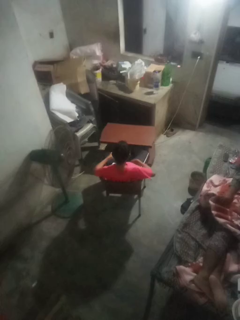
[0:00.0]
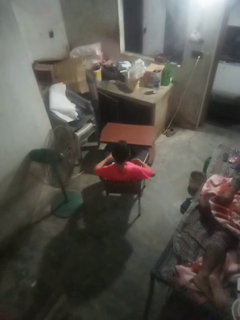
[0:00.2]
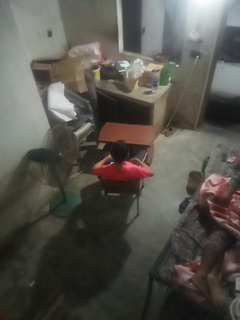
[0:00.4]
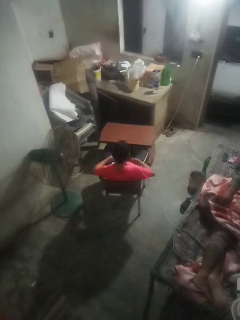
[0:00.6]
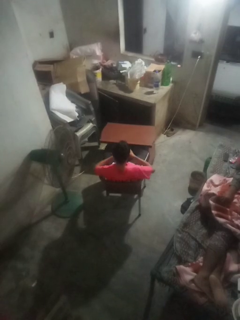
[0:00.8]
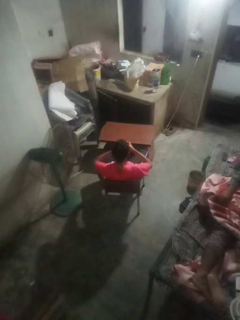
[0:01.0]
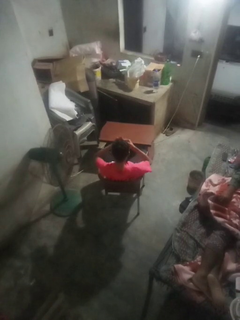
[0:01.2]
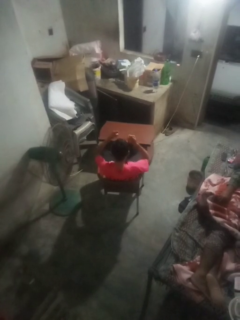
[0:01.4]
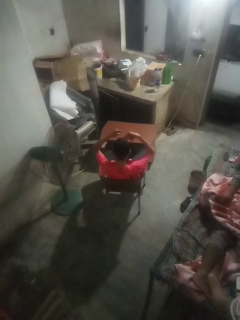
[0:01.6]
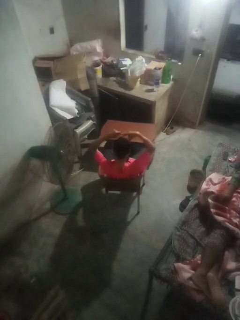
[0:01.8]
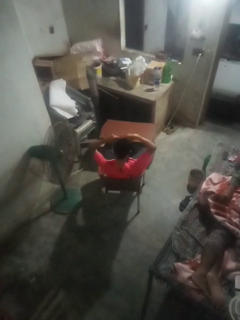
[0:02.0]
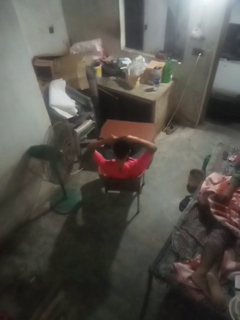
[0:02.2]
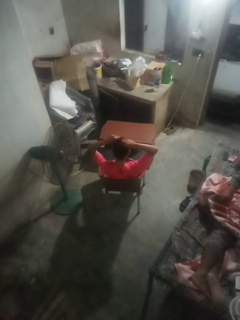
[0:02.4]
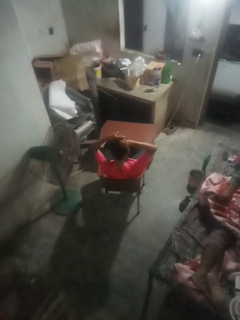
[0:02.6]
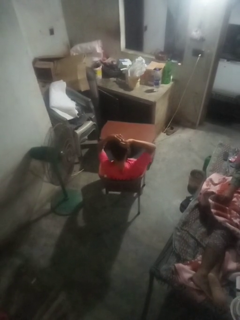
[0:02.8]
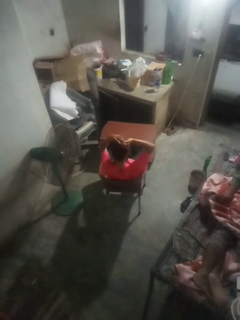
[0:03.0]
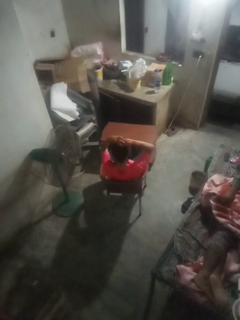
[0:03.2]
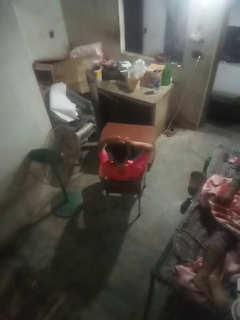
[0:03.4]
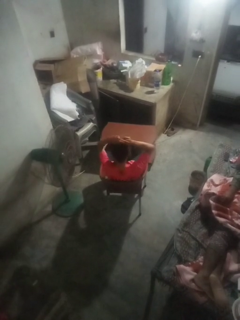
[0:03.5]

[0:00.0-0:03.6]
person puts hair in ponytail

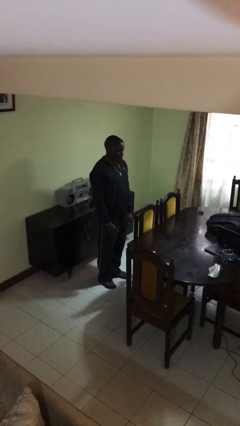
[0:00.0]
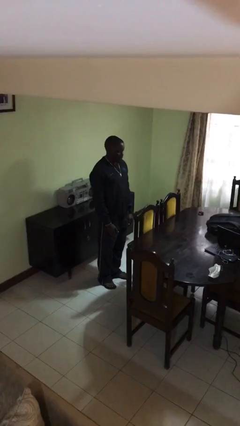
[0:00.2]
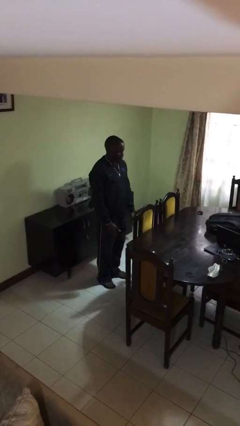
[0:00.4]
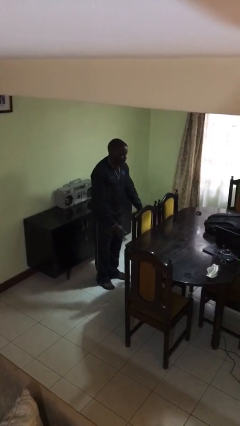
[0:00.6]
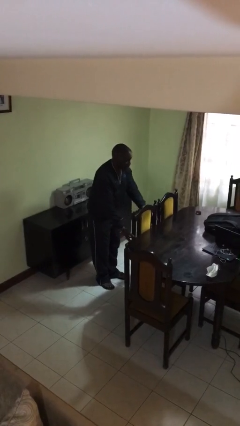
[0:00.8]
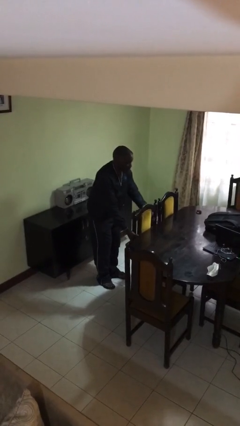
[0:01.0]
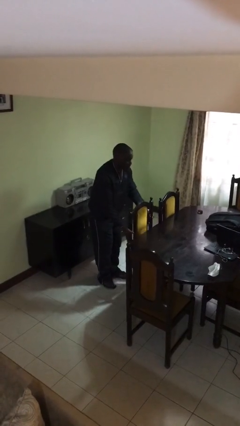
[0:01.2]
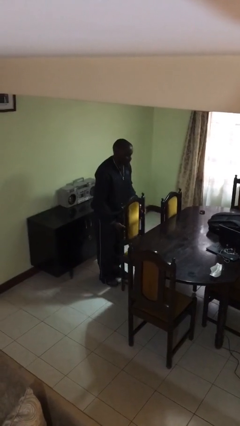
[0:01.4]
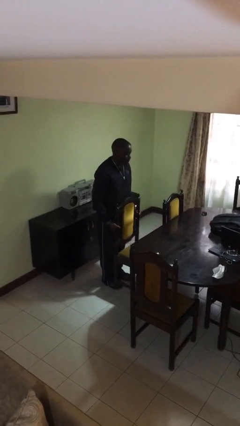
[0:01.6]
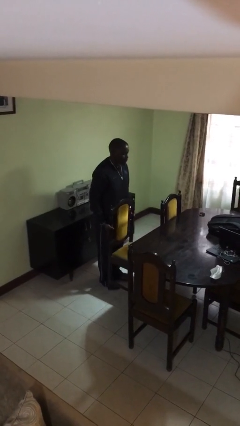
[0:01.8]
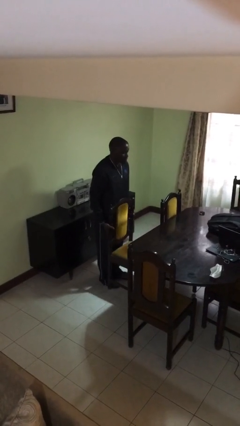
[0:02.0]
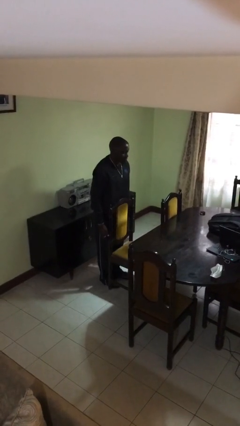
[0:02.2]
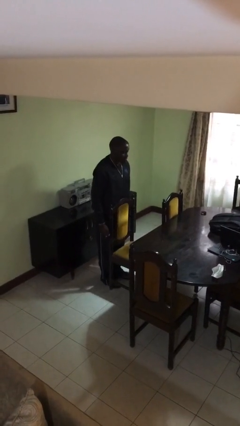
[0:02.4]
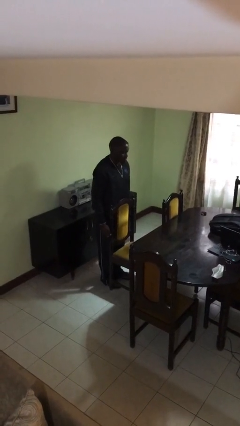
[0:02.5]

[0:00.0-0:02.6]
person pulls out chair

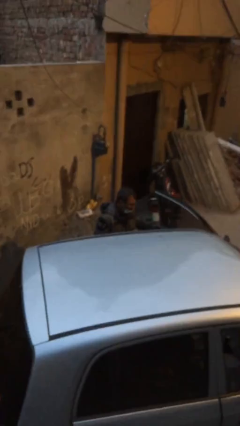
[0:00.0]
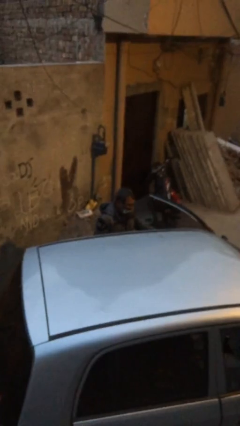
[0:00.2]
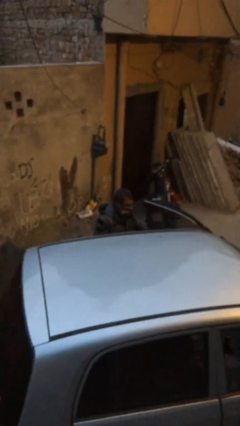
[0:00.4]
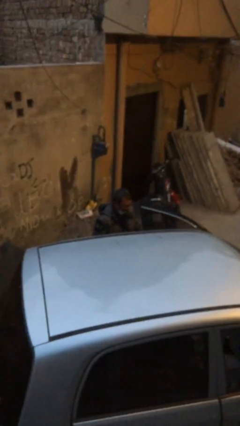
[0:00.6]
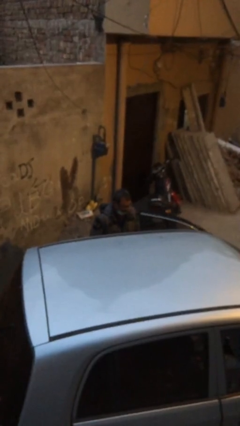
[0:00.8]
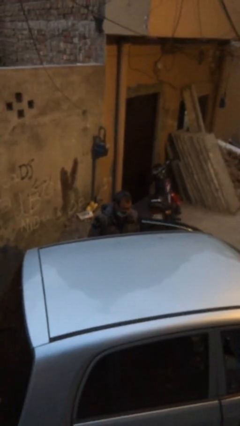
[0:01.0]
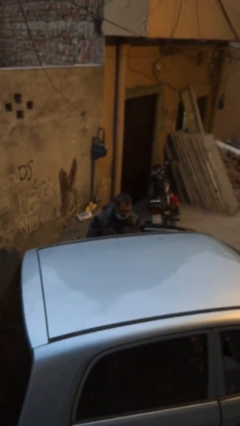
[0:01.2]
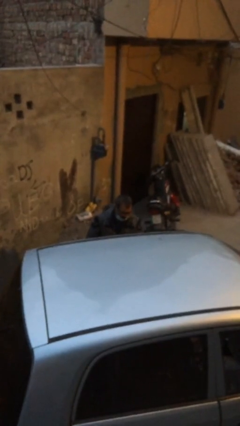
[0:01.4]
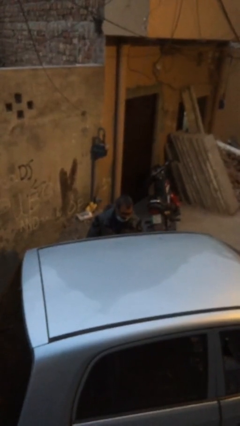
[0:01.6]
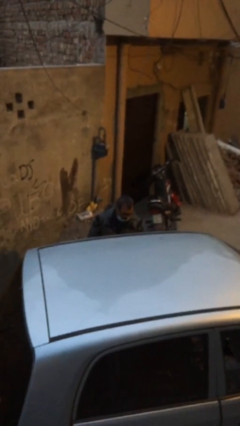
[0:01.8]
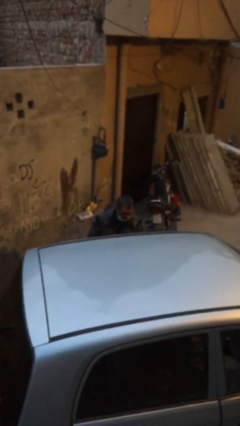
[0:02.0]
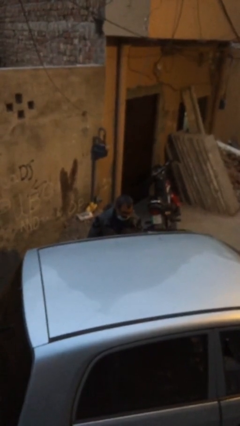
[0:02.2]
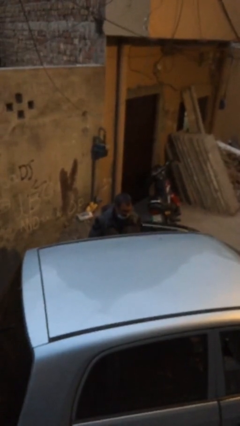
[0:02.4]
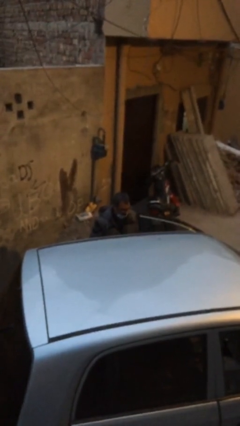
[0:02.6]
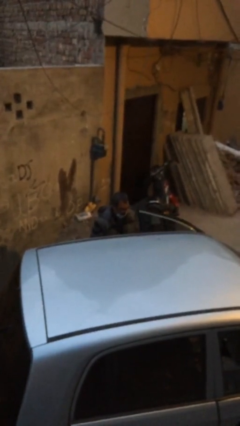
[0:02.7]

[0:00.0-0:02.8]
person closes car door

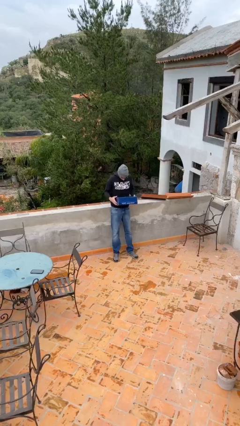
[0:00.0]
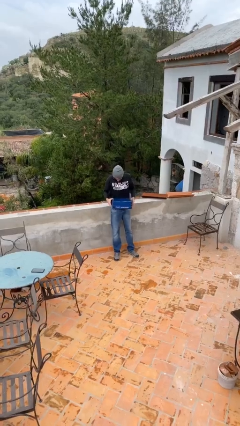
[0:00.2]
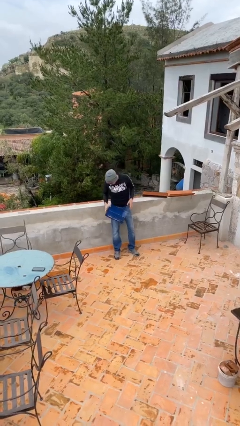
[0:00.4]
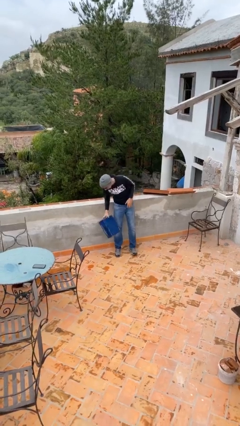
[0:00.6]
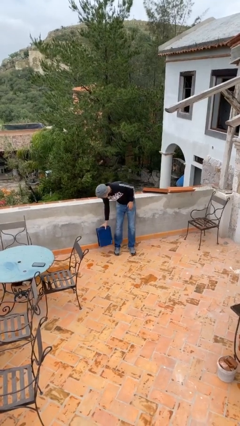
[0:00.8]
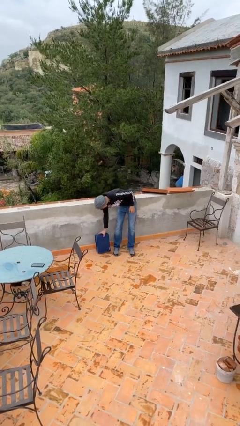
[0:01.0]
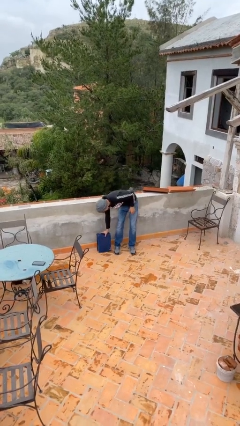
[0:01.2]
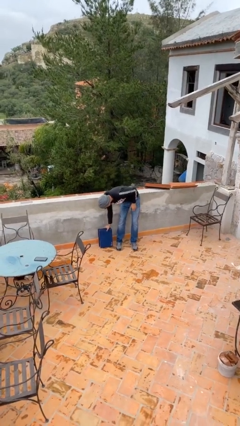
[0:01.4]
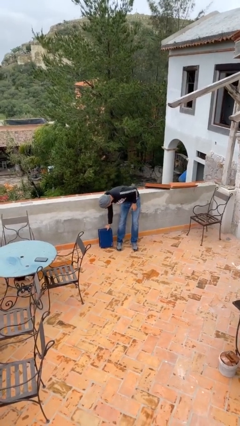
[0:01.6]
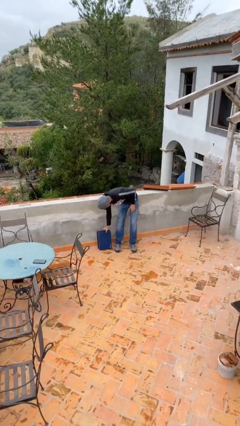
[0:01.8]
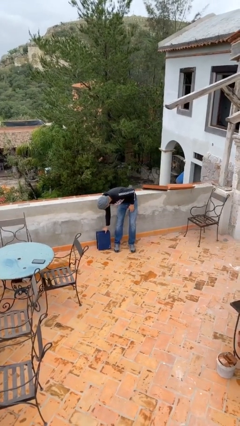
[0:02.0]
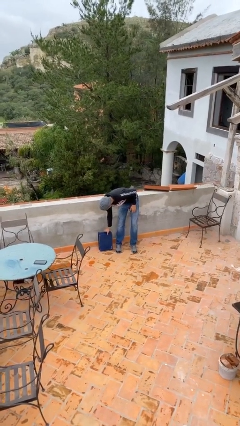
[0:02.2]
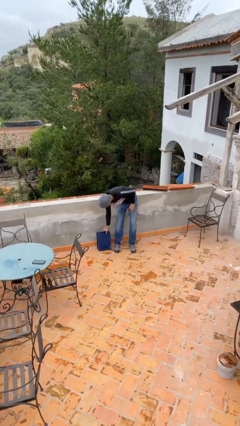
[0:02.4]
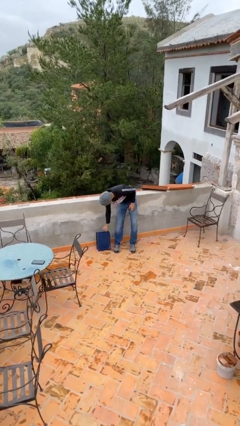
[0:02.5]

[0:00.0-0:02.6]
person puts down object on floor

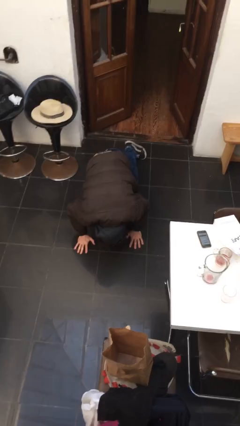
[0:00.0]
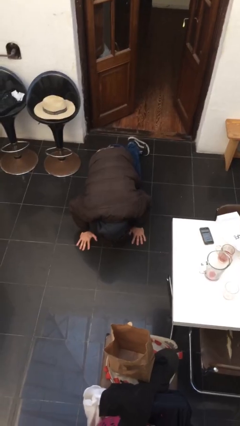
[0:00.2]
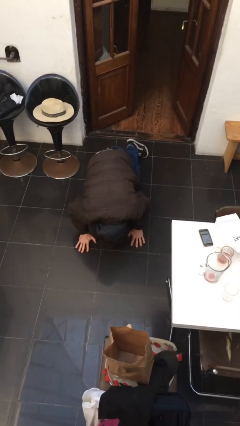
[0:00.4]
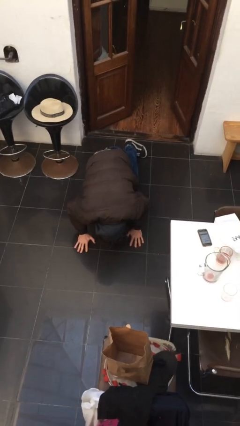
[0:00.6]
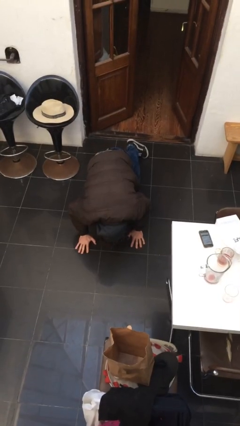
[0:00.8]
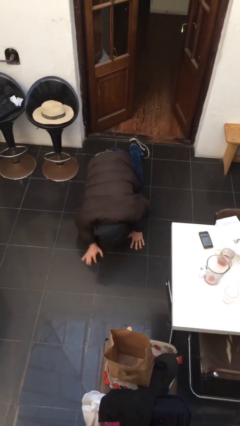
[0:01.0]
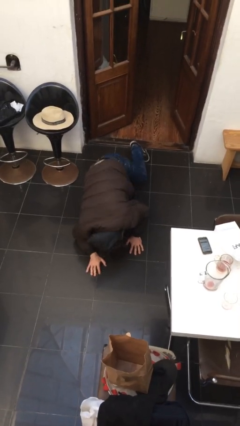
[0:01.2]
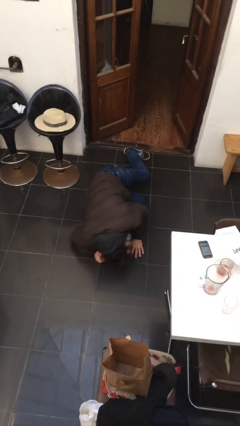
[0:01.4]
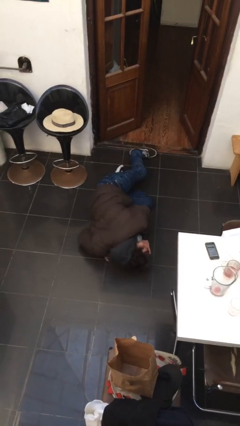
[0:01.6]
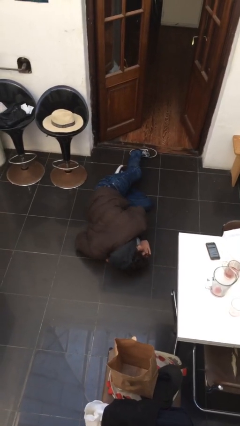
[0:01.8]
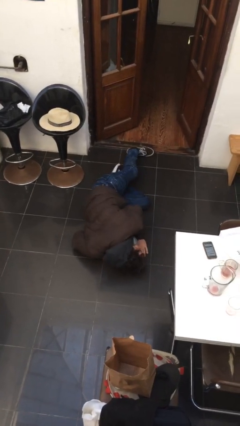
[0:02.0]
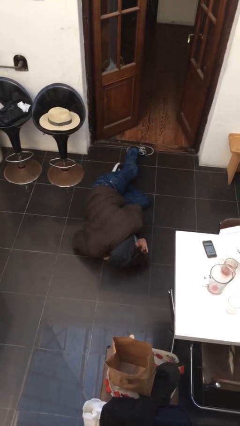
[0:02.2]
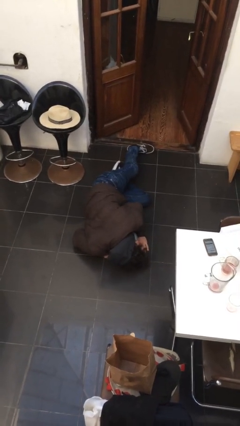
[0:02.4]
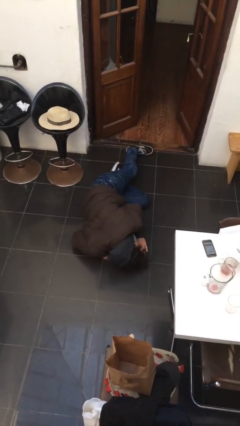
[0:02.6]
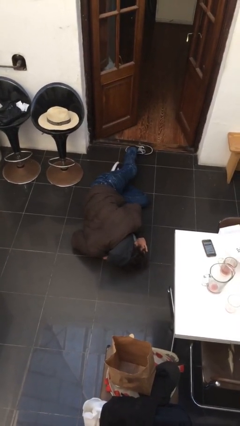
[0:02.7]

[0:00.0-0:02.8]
person lies down on floor

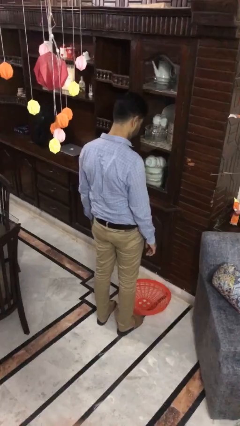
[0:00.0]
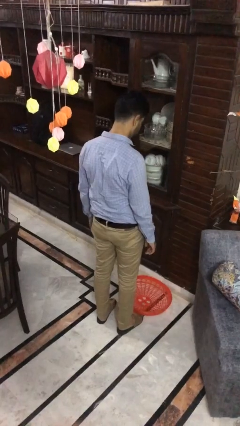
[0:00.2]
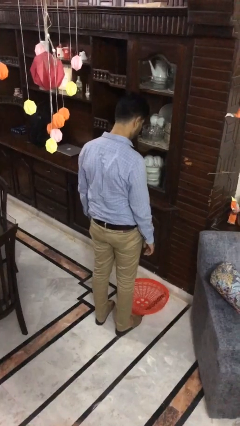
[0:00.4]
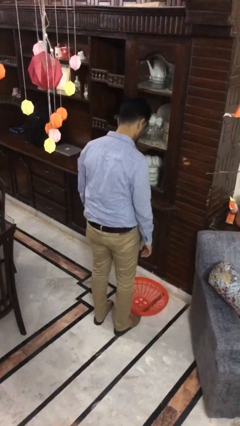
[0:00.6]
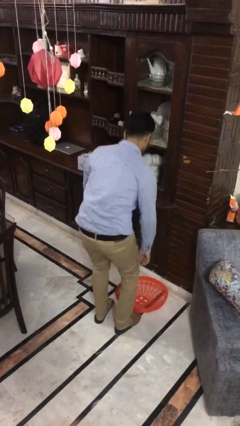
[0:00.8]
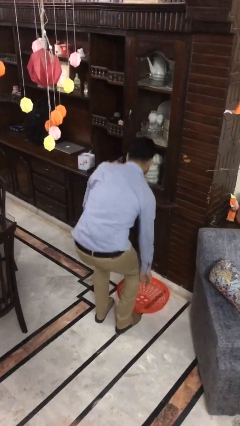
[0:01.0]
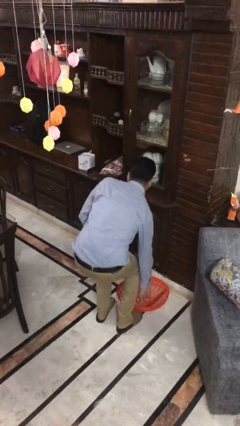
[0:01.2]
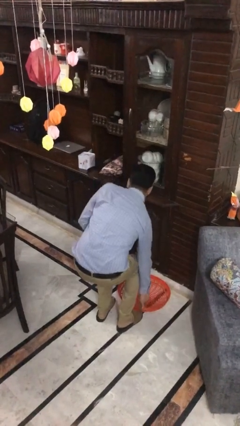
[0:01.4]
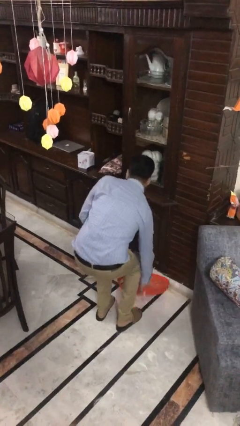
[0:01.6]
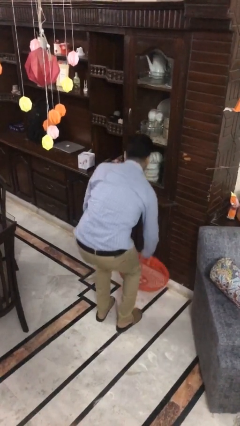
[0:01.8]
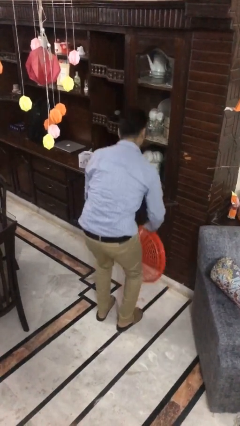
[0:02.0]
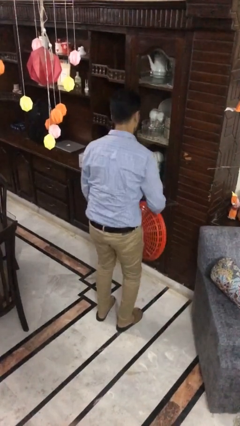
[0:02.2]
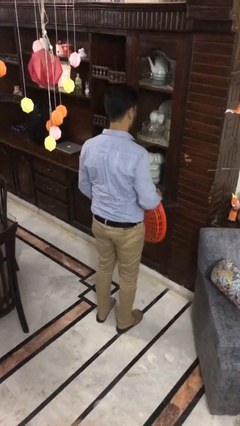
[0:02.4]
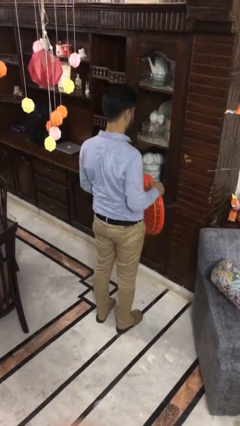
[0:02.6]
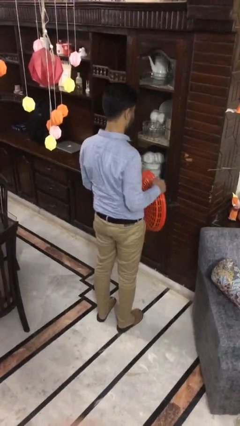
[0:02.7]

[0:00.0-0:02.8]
person picks up object from floor

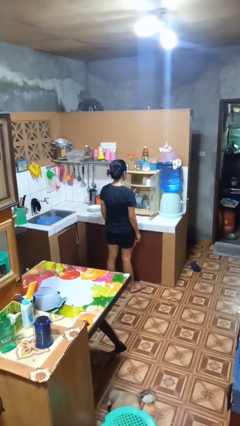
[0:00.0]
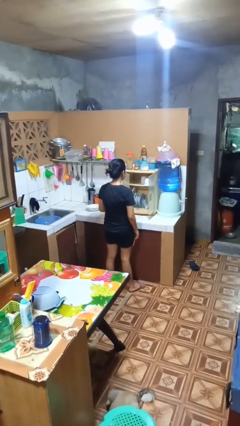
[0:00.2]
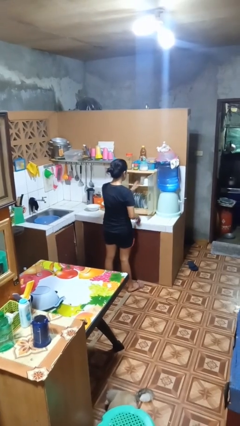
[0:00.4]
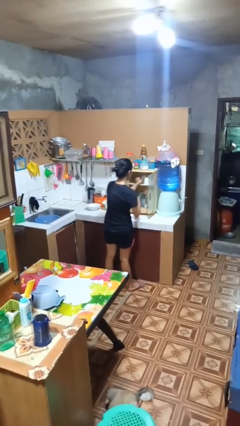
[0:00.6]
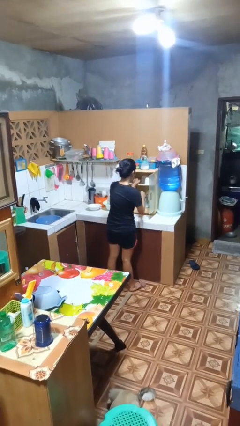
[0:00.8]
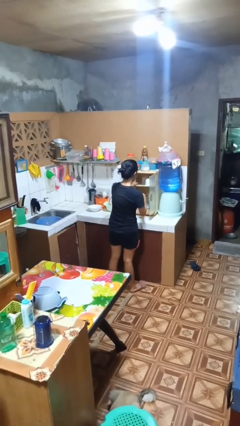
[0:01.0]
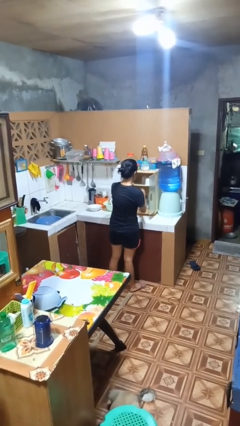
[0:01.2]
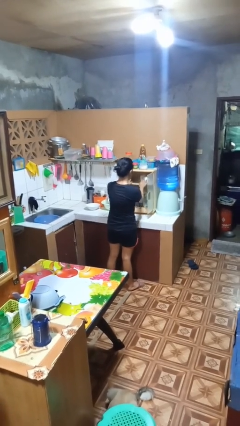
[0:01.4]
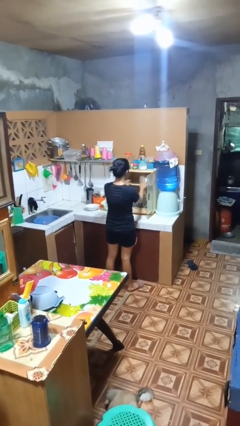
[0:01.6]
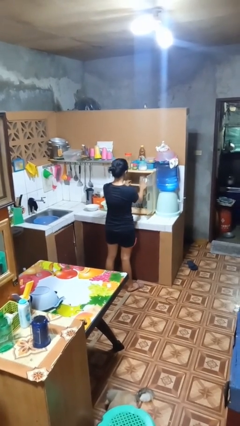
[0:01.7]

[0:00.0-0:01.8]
person searches in kitchen drawer
